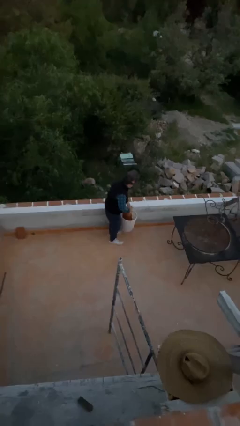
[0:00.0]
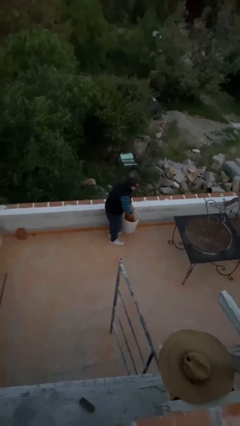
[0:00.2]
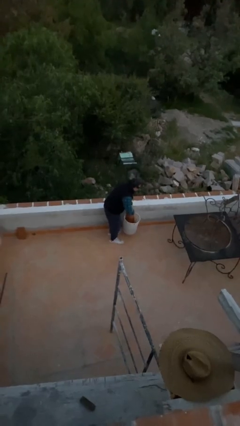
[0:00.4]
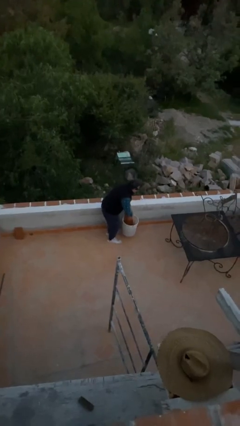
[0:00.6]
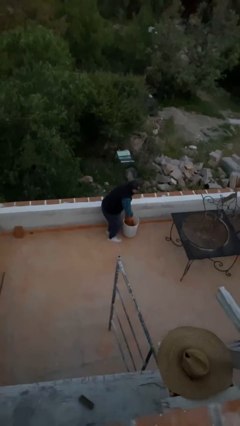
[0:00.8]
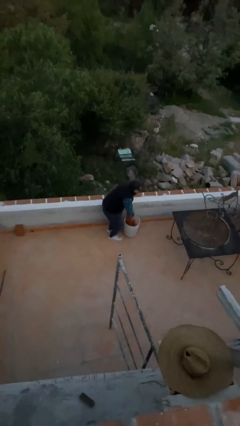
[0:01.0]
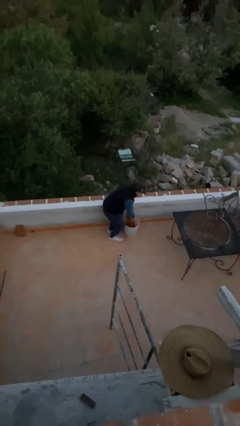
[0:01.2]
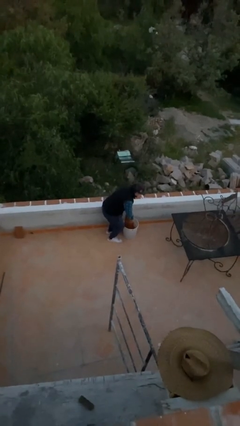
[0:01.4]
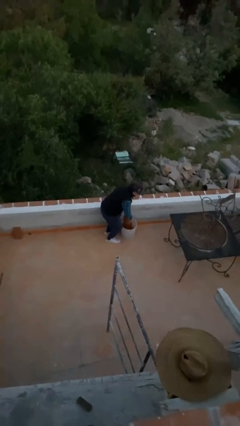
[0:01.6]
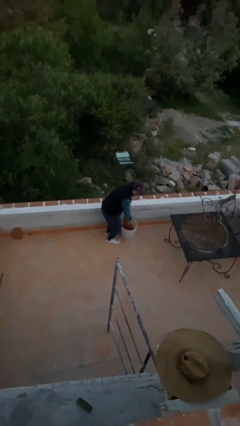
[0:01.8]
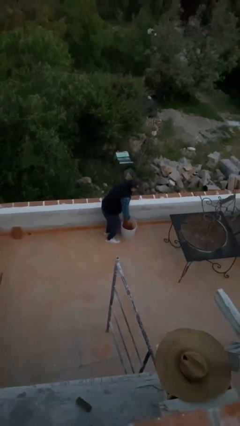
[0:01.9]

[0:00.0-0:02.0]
person puts down object on floor

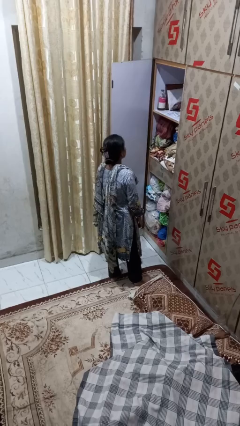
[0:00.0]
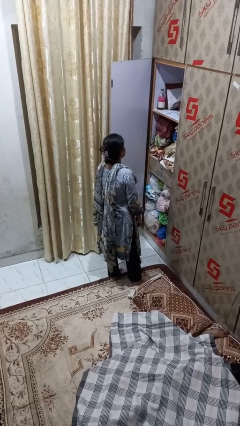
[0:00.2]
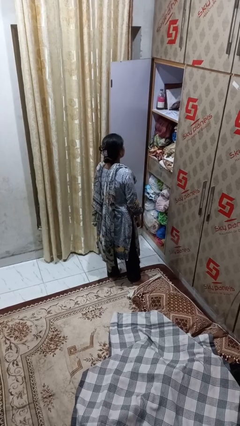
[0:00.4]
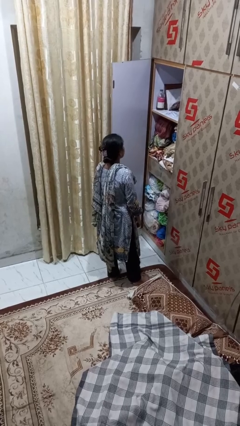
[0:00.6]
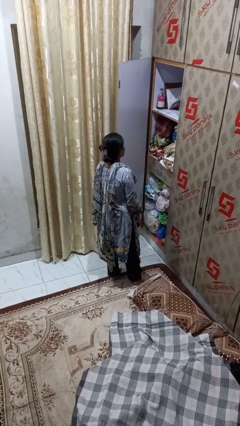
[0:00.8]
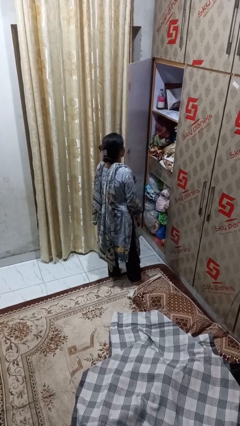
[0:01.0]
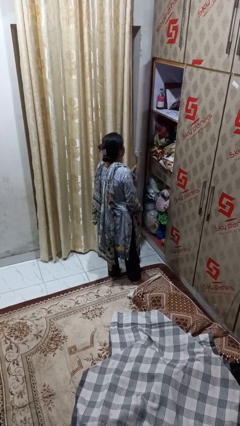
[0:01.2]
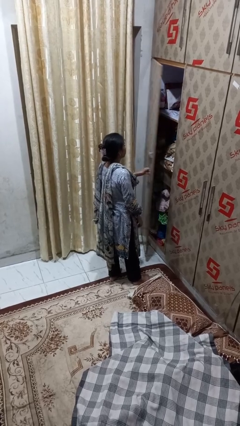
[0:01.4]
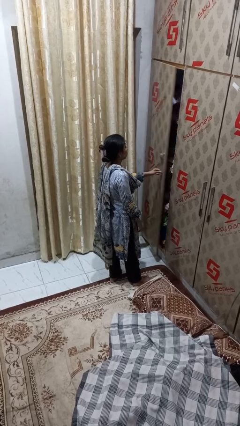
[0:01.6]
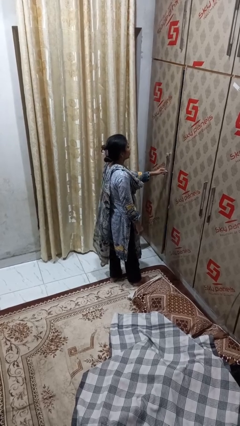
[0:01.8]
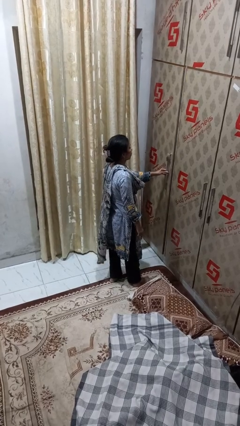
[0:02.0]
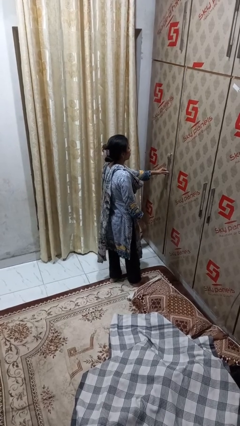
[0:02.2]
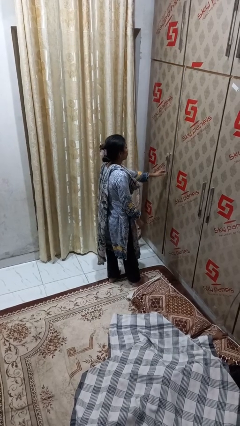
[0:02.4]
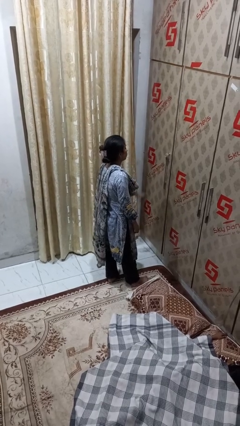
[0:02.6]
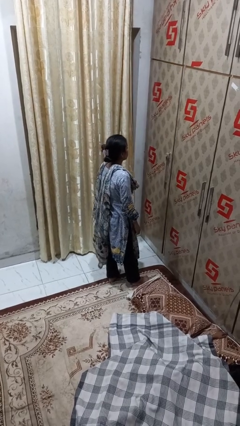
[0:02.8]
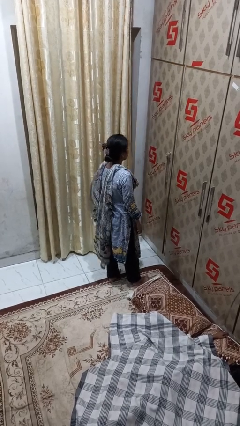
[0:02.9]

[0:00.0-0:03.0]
person closes closet door

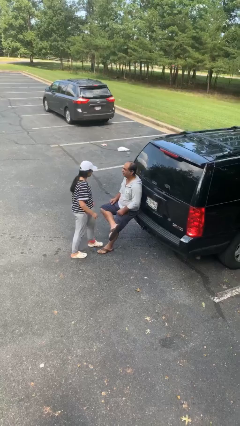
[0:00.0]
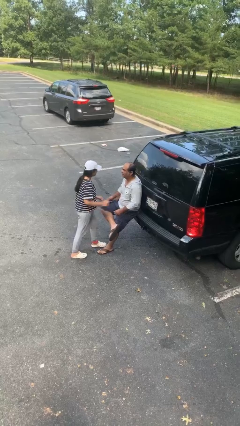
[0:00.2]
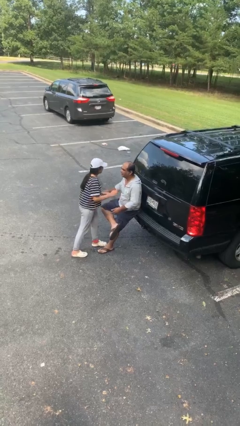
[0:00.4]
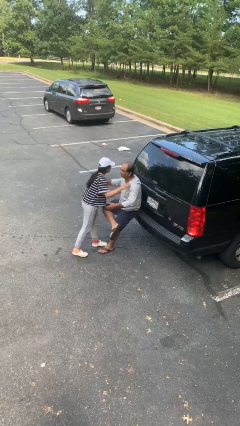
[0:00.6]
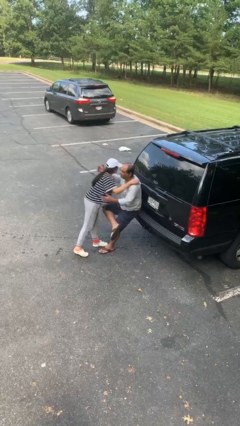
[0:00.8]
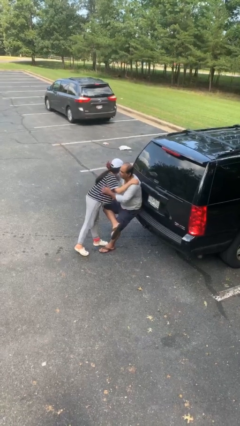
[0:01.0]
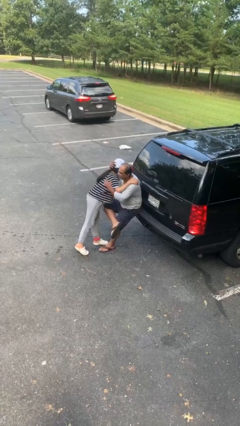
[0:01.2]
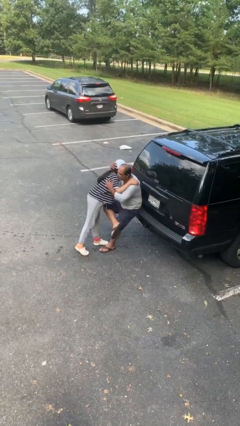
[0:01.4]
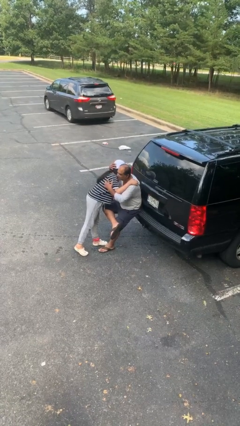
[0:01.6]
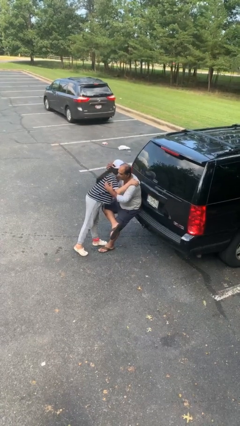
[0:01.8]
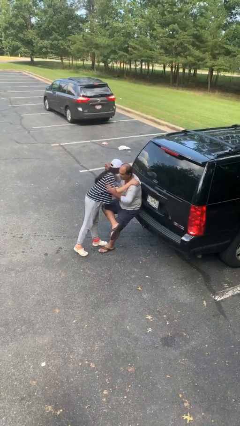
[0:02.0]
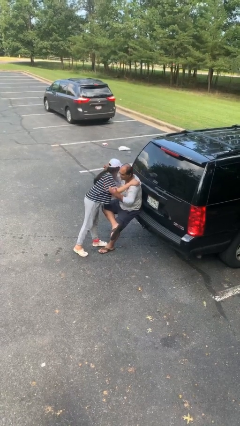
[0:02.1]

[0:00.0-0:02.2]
person embraces person

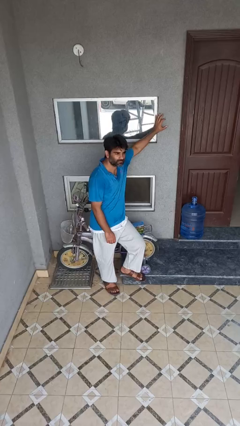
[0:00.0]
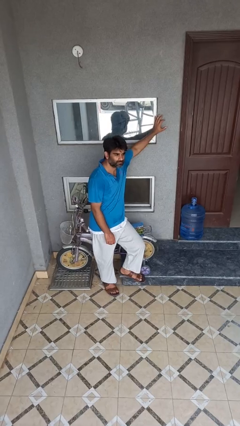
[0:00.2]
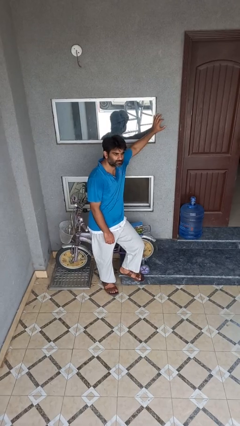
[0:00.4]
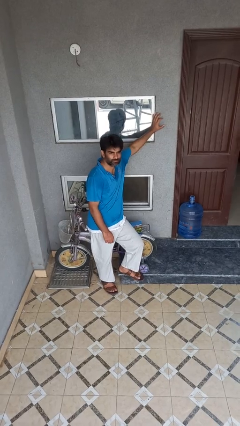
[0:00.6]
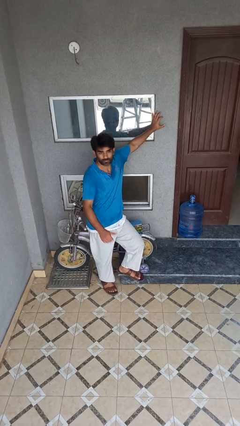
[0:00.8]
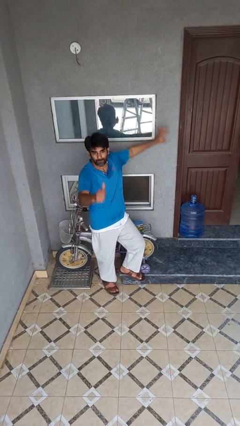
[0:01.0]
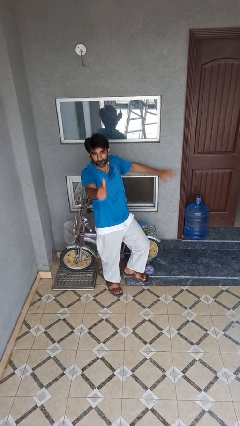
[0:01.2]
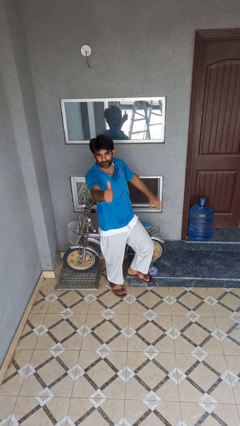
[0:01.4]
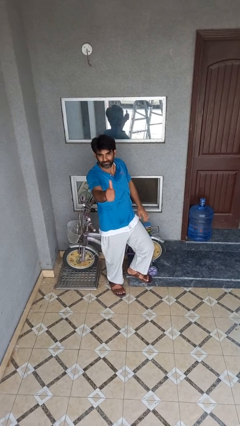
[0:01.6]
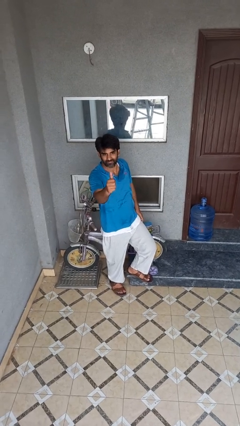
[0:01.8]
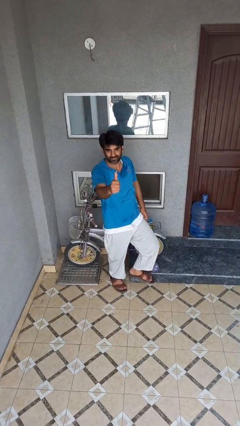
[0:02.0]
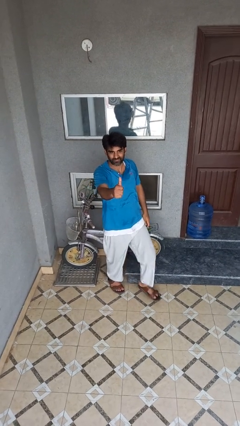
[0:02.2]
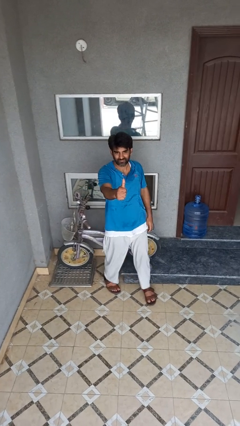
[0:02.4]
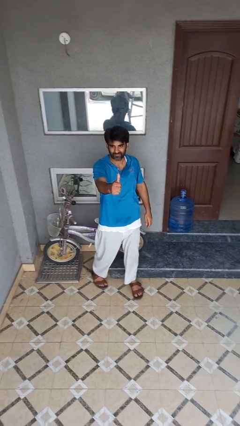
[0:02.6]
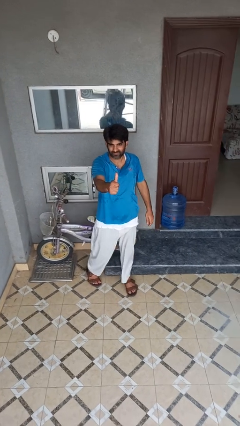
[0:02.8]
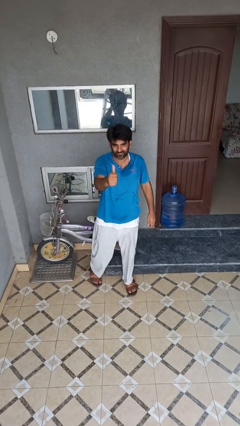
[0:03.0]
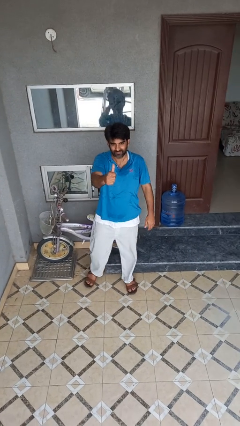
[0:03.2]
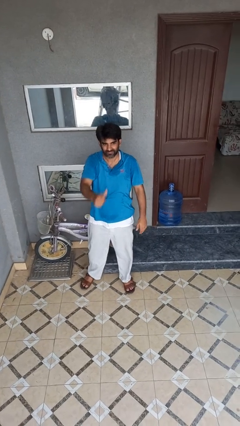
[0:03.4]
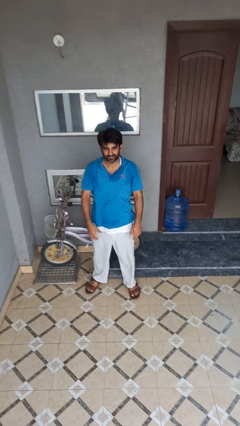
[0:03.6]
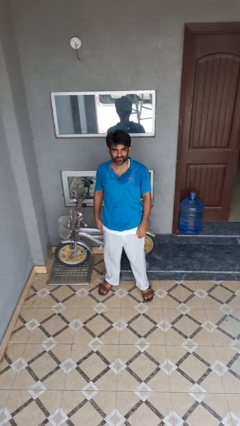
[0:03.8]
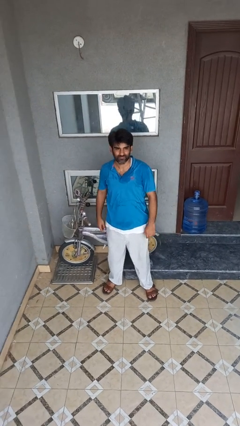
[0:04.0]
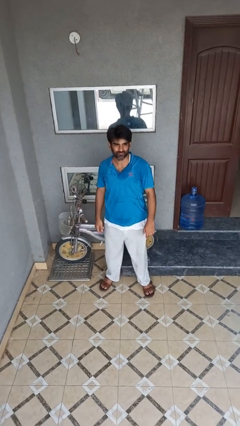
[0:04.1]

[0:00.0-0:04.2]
person gestures thumbs up

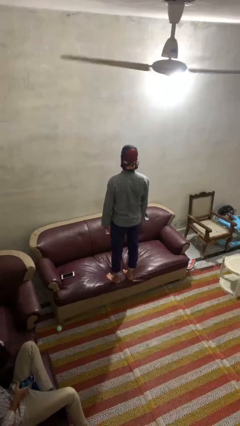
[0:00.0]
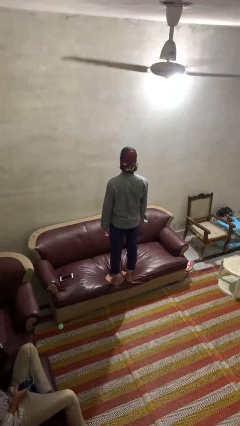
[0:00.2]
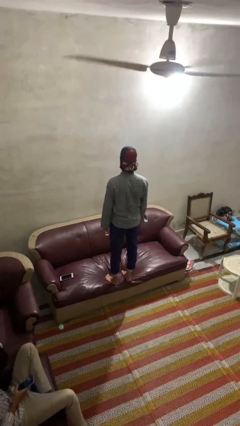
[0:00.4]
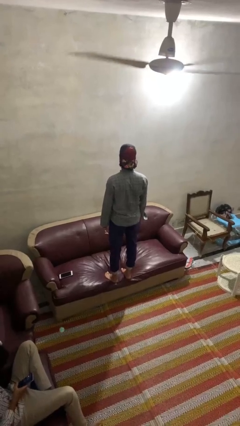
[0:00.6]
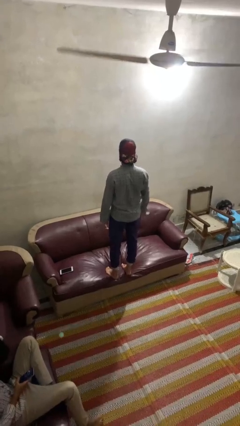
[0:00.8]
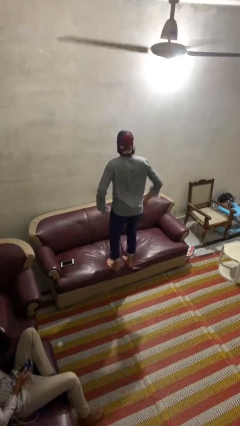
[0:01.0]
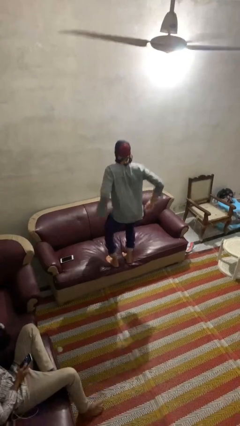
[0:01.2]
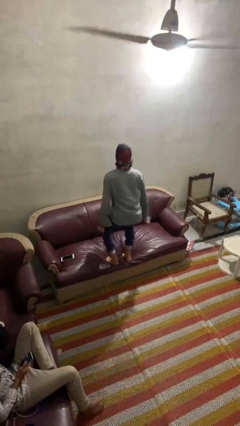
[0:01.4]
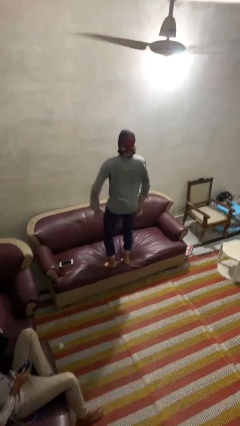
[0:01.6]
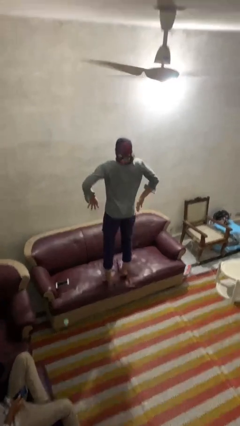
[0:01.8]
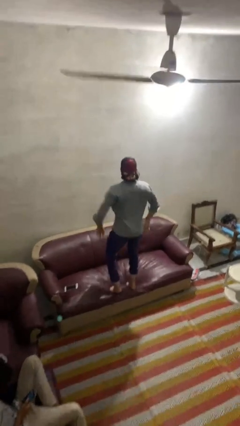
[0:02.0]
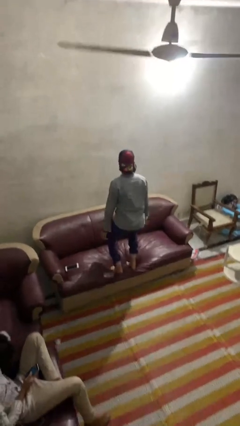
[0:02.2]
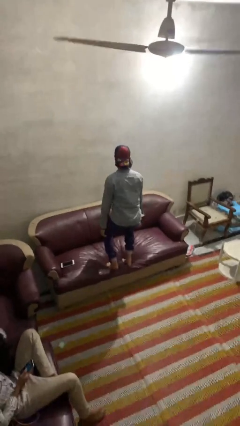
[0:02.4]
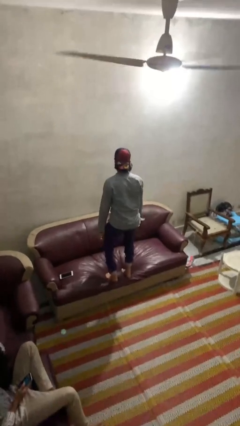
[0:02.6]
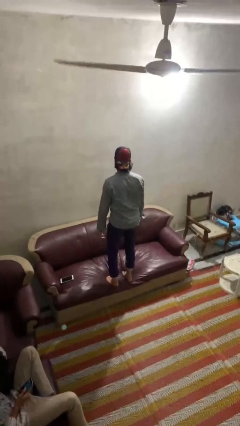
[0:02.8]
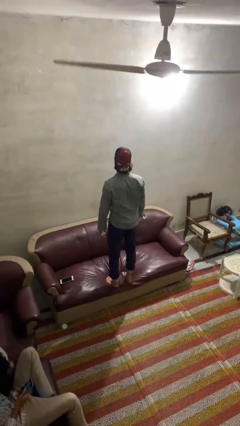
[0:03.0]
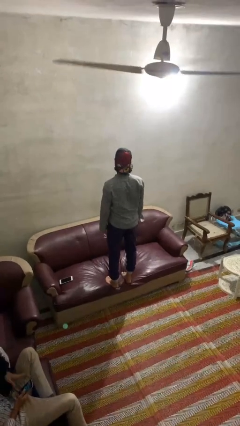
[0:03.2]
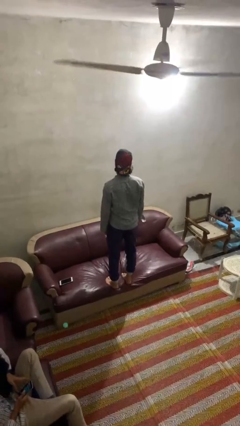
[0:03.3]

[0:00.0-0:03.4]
person jumps on couch

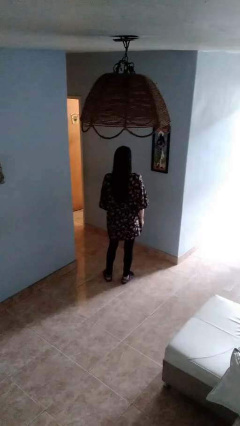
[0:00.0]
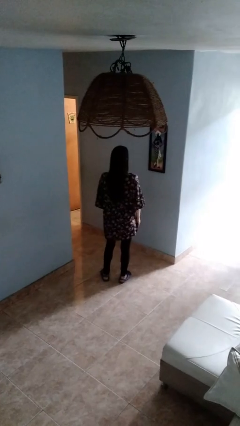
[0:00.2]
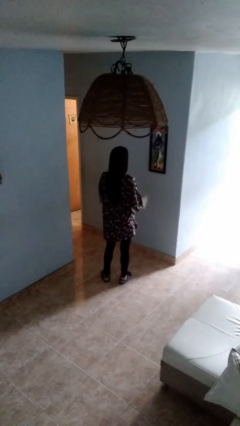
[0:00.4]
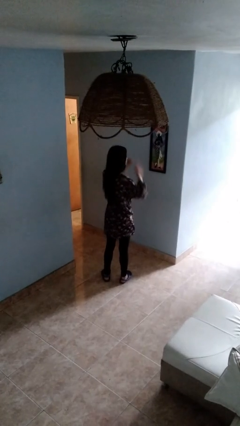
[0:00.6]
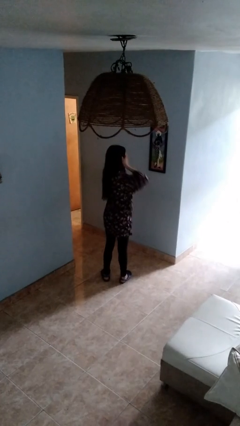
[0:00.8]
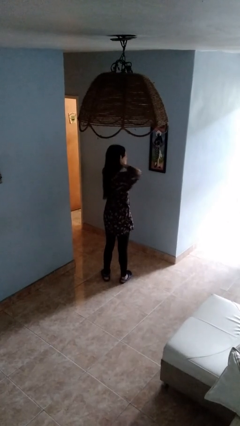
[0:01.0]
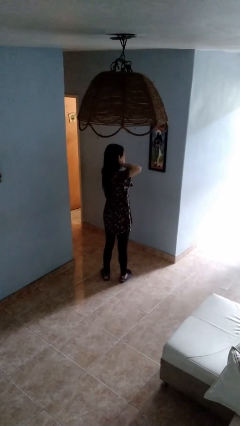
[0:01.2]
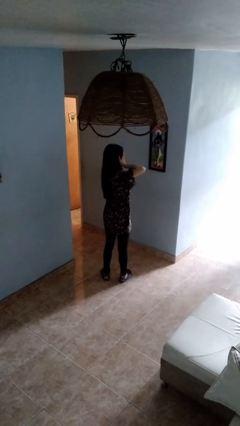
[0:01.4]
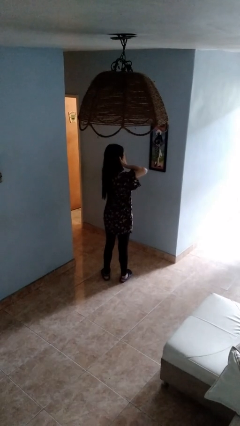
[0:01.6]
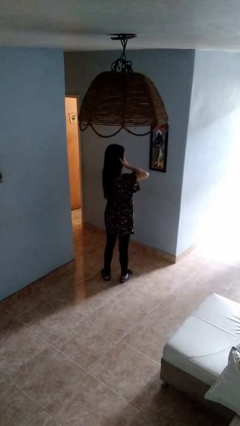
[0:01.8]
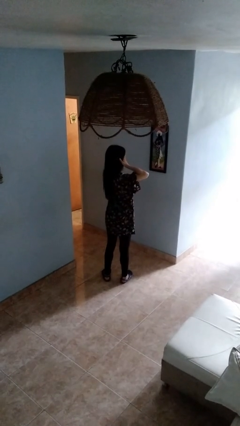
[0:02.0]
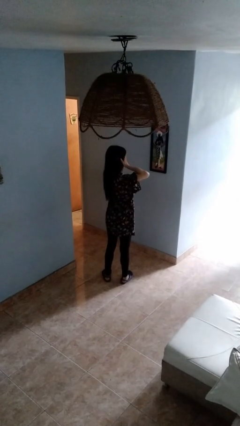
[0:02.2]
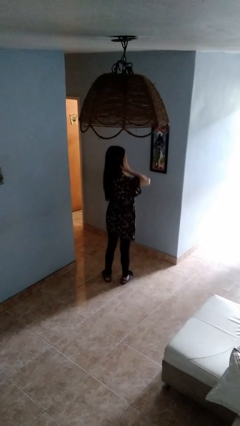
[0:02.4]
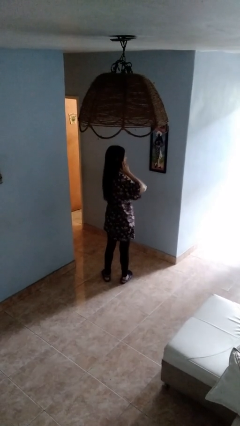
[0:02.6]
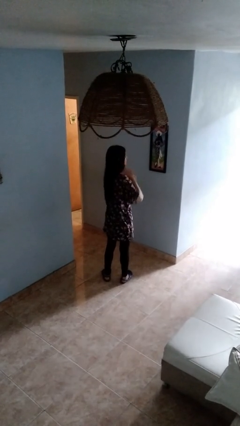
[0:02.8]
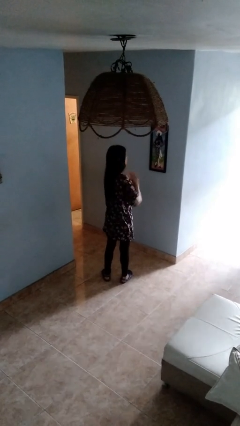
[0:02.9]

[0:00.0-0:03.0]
person rubs eyes
